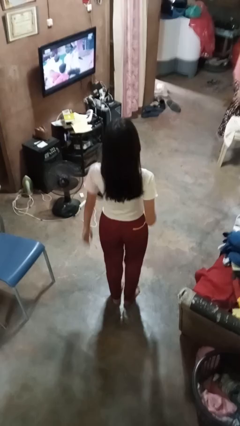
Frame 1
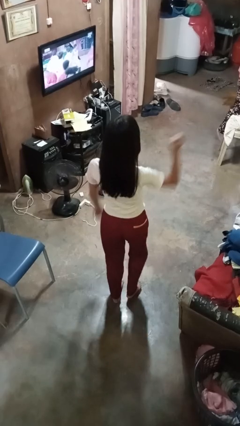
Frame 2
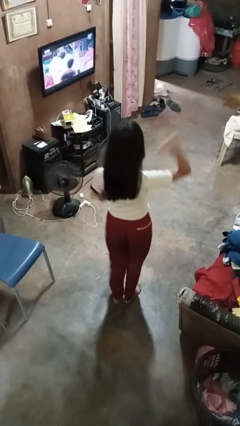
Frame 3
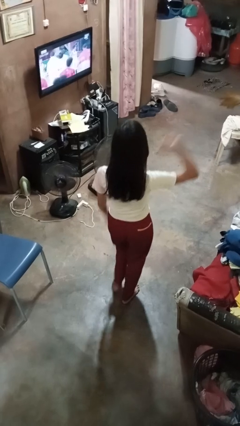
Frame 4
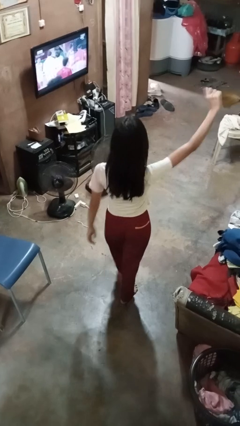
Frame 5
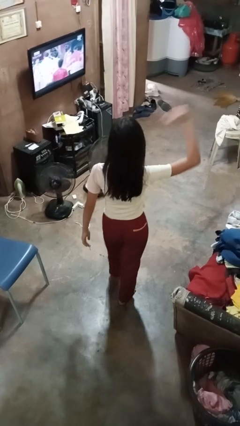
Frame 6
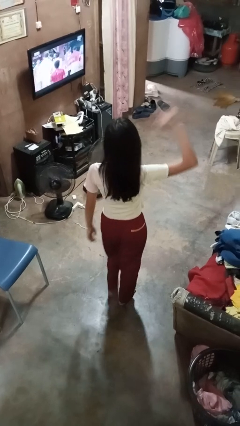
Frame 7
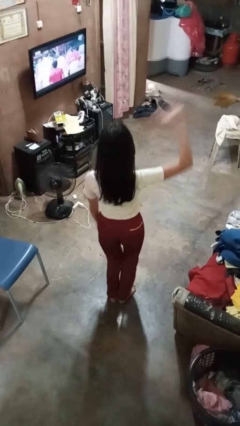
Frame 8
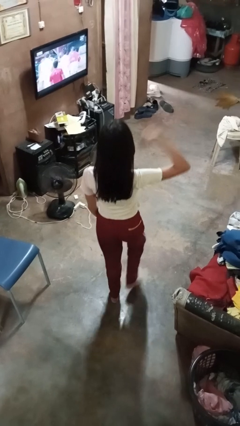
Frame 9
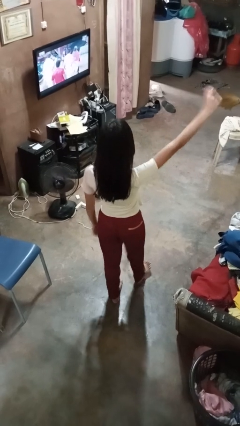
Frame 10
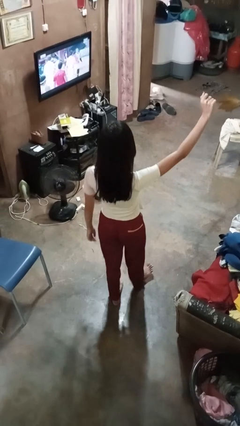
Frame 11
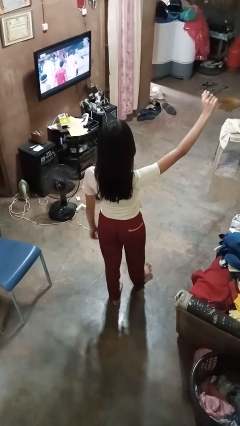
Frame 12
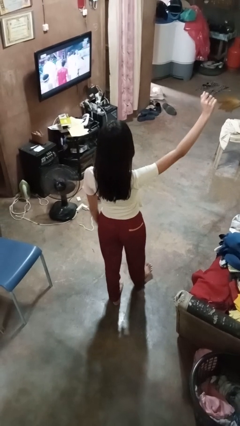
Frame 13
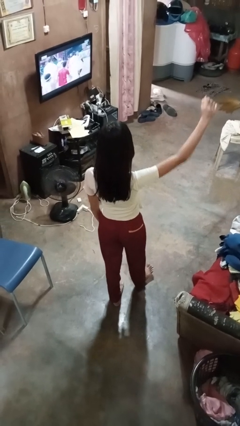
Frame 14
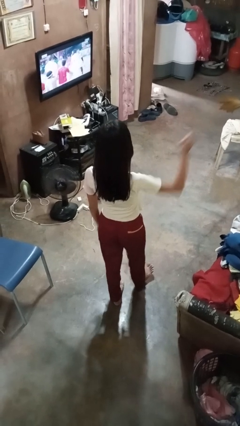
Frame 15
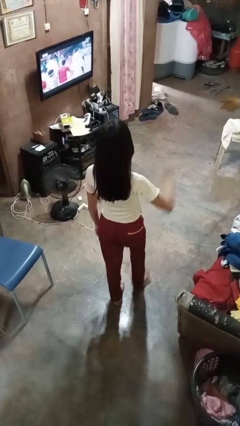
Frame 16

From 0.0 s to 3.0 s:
person dances in place

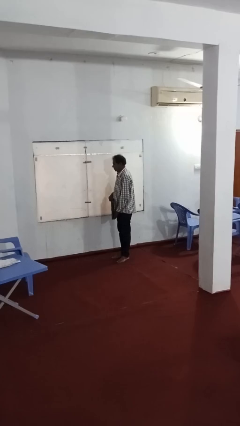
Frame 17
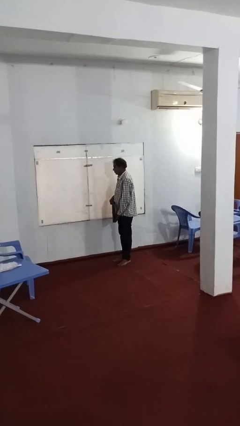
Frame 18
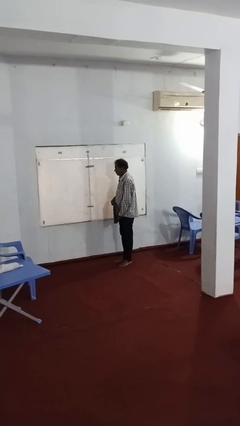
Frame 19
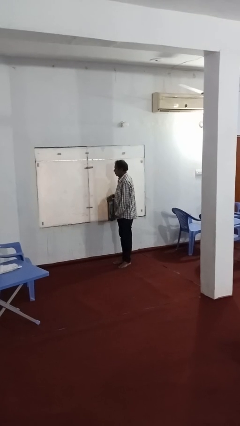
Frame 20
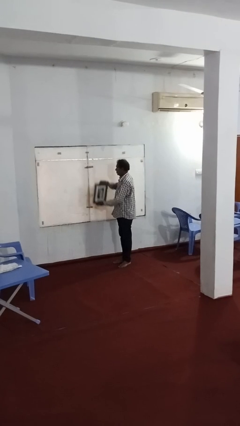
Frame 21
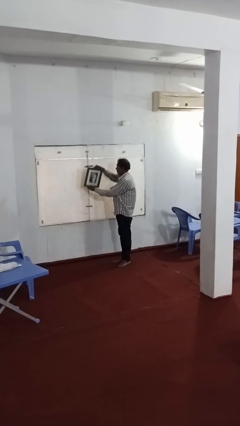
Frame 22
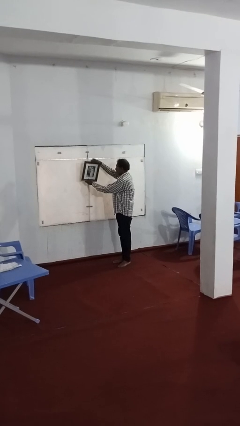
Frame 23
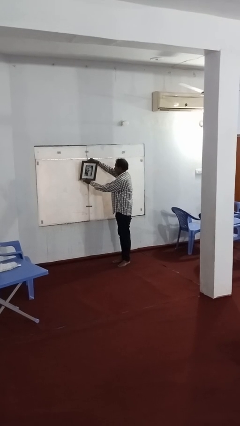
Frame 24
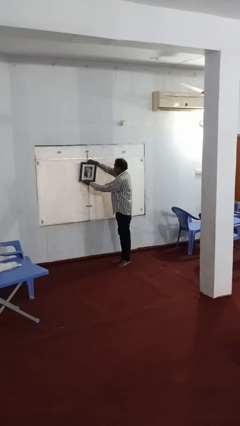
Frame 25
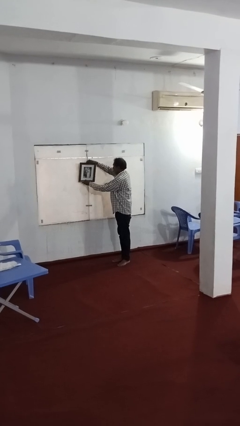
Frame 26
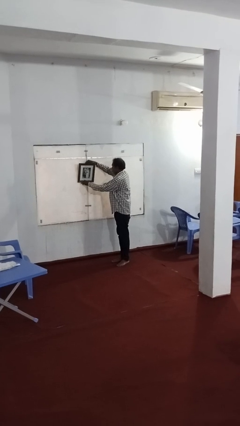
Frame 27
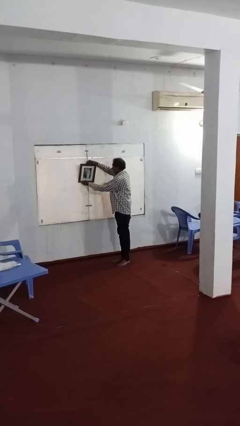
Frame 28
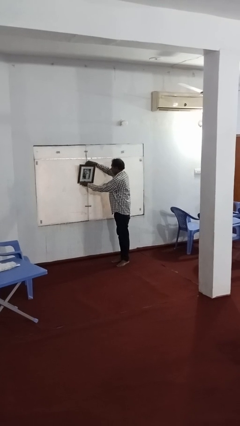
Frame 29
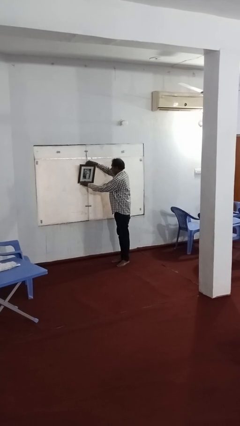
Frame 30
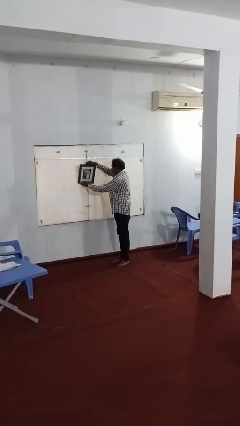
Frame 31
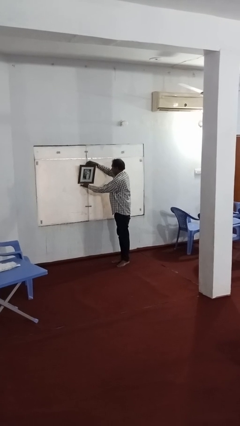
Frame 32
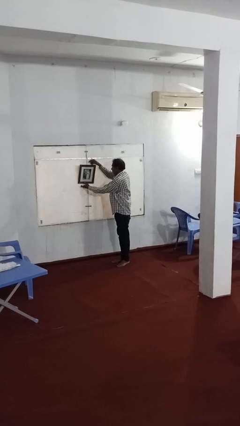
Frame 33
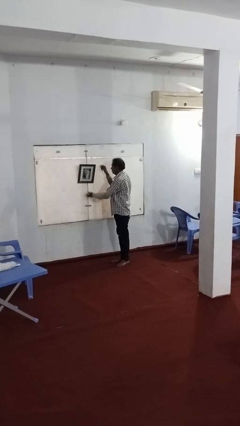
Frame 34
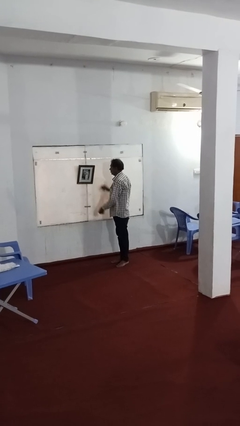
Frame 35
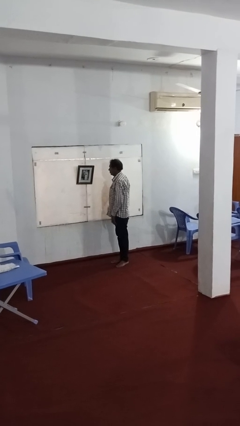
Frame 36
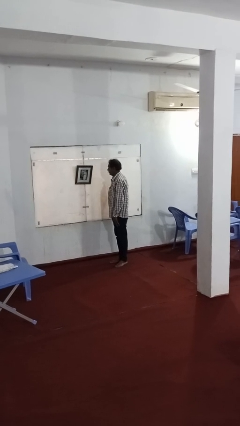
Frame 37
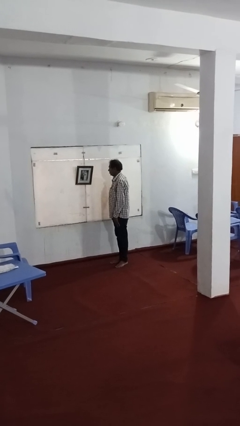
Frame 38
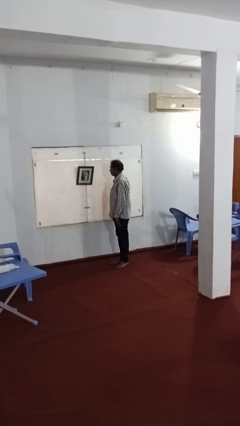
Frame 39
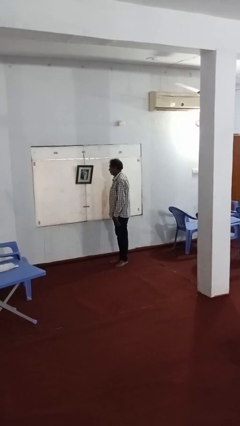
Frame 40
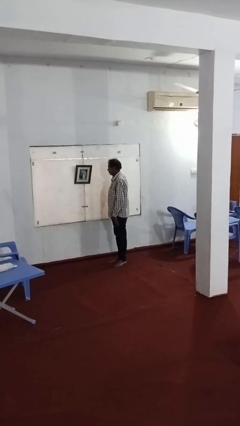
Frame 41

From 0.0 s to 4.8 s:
person puts up picture frame

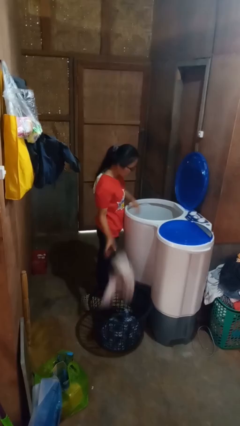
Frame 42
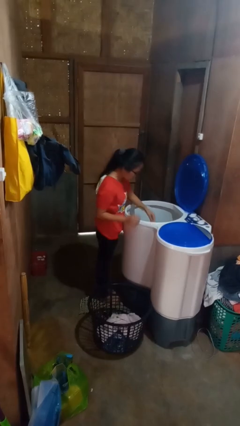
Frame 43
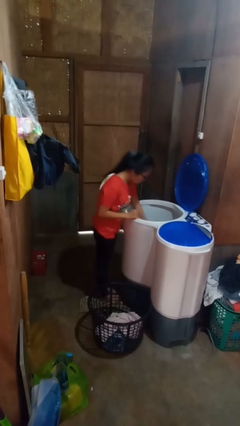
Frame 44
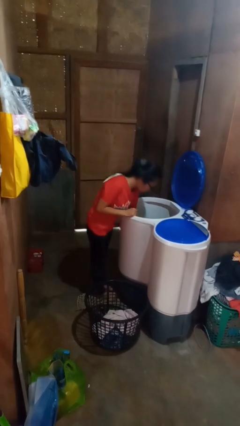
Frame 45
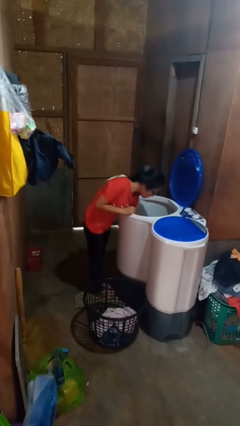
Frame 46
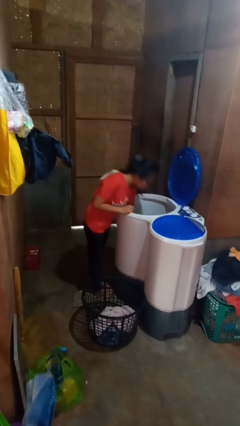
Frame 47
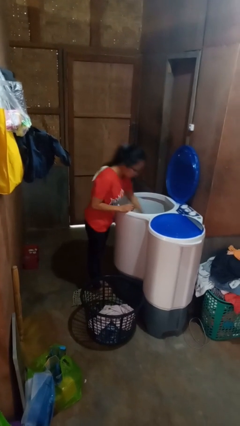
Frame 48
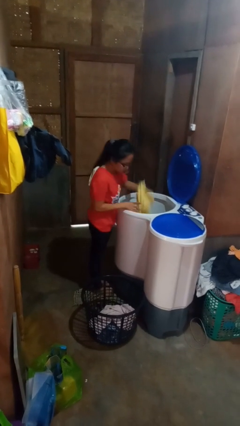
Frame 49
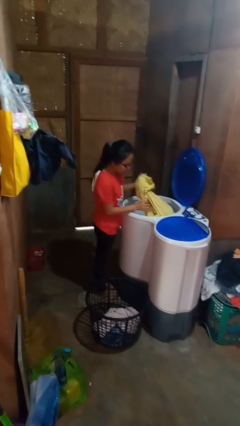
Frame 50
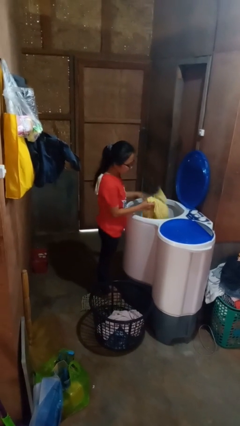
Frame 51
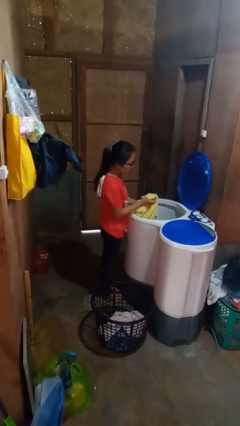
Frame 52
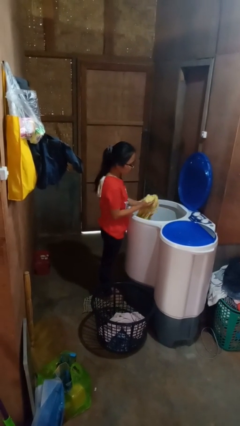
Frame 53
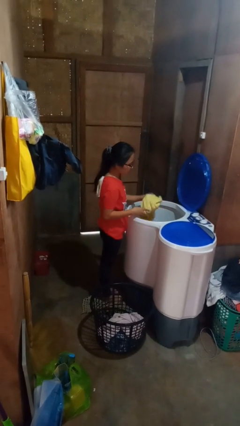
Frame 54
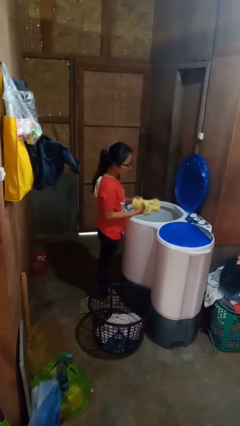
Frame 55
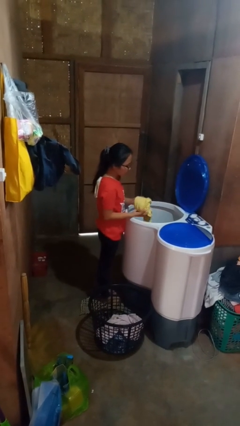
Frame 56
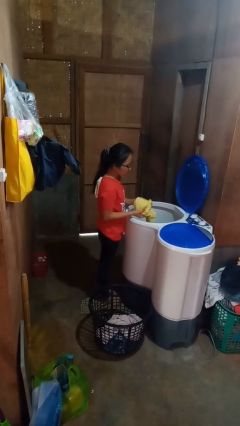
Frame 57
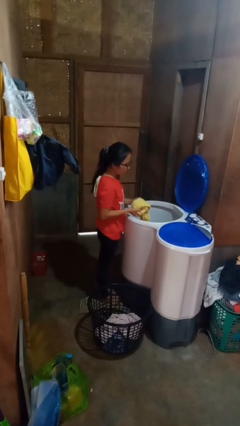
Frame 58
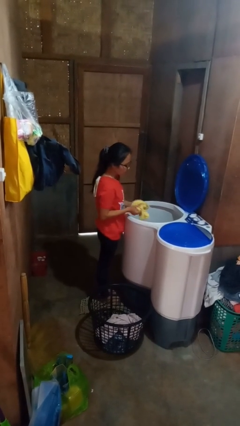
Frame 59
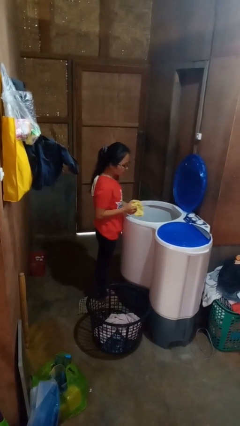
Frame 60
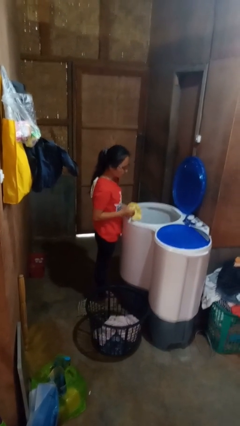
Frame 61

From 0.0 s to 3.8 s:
person loads clotheswasher

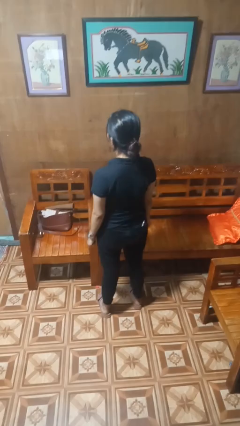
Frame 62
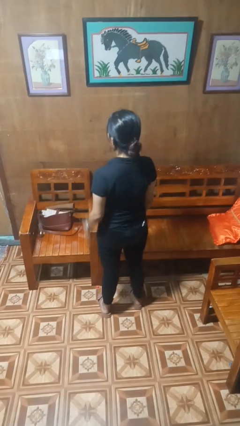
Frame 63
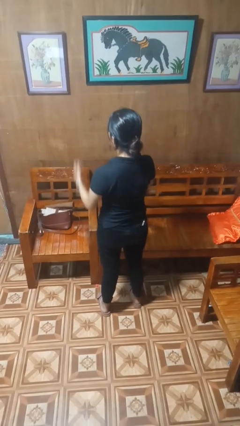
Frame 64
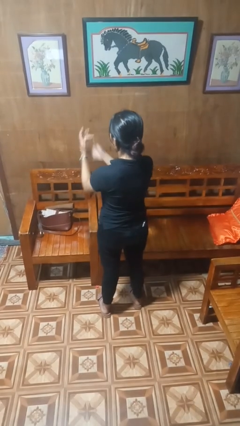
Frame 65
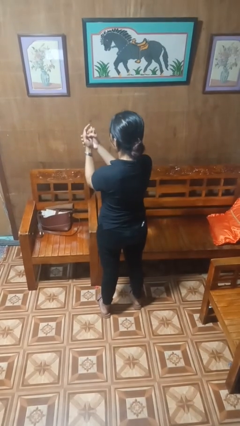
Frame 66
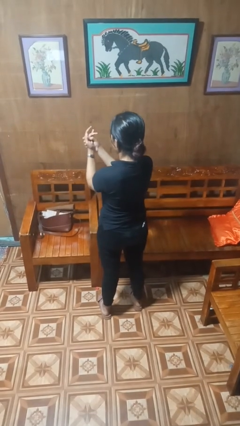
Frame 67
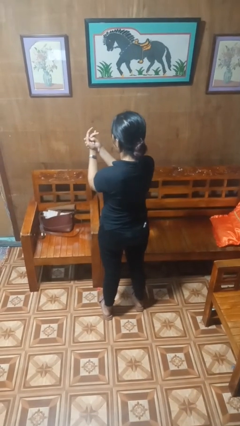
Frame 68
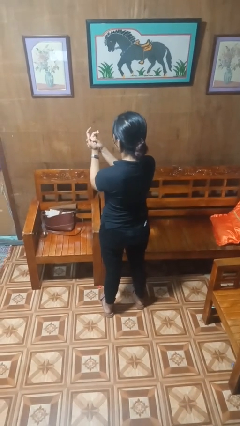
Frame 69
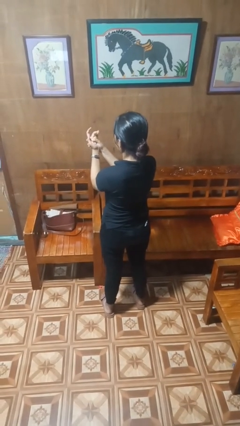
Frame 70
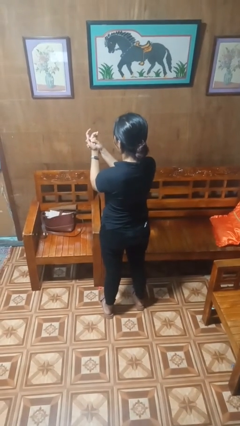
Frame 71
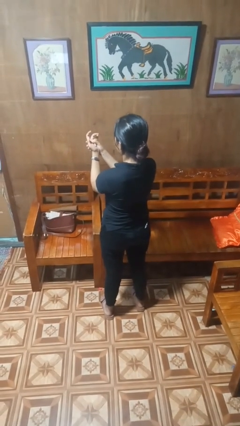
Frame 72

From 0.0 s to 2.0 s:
person cracks knuckles

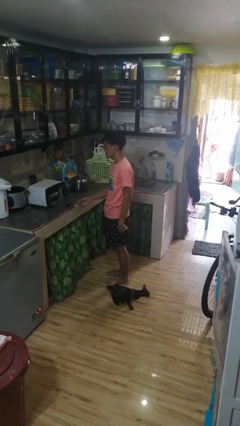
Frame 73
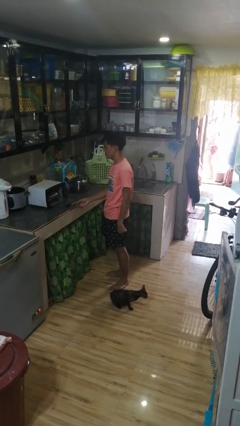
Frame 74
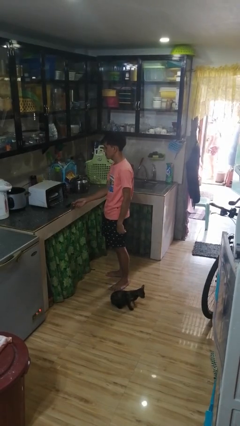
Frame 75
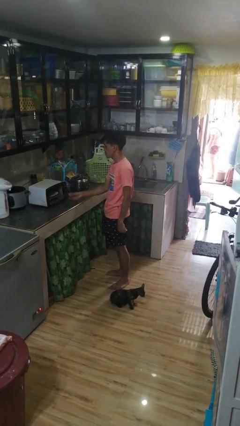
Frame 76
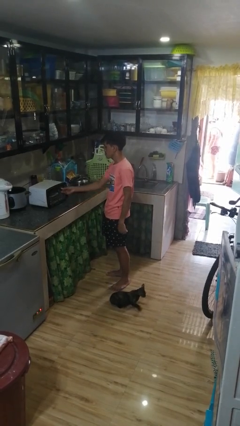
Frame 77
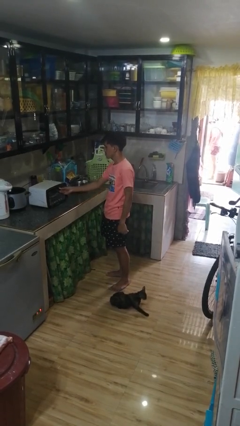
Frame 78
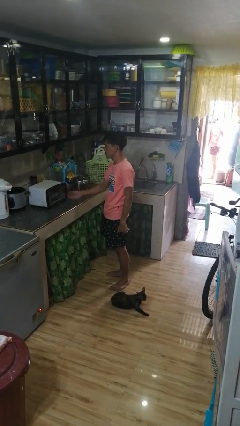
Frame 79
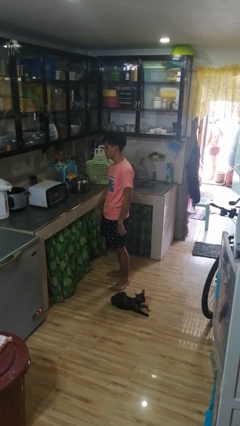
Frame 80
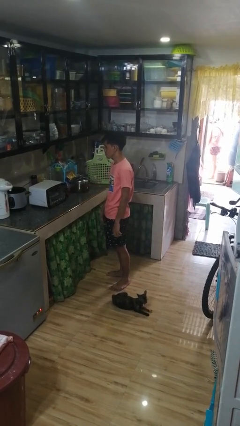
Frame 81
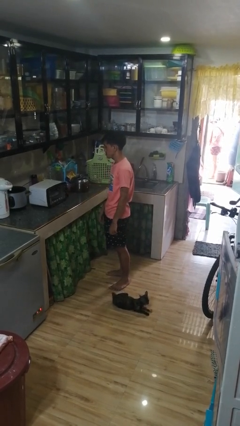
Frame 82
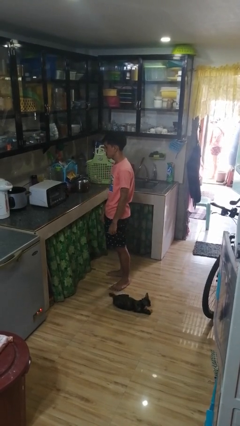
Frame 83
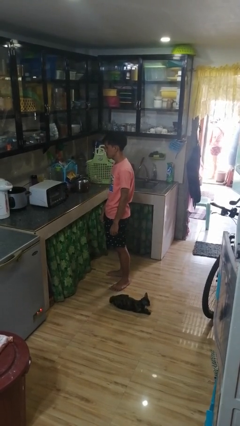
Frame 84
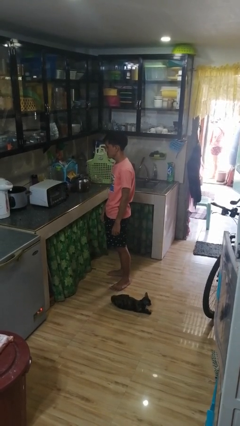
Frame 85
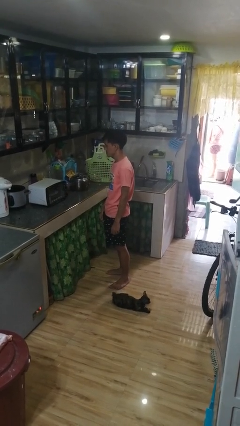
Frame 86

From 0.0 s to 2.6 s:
person closes microwave

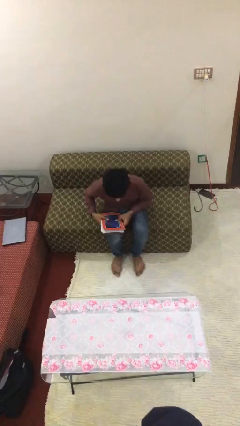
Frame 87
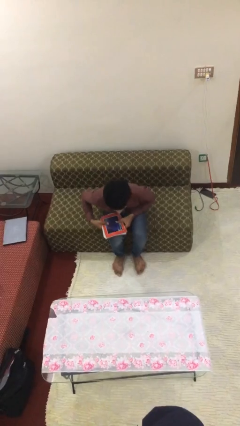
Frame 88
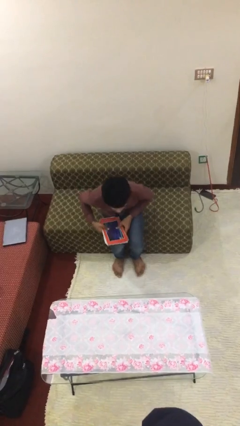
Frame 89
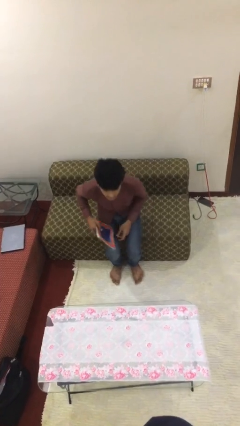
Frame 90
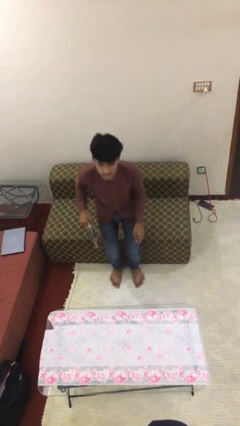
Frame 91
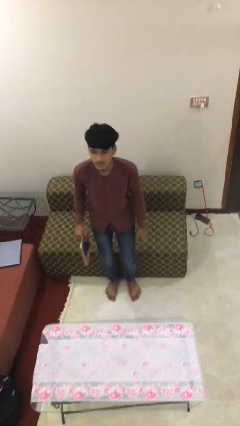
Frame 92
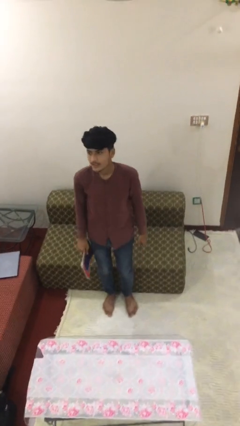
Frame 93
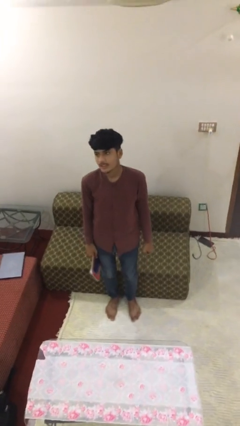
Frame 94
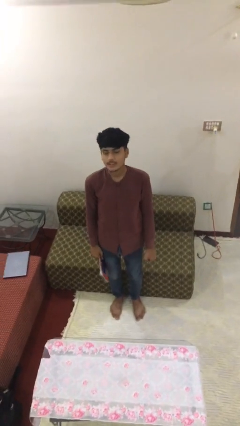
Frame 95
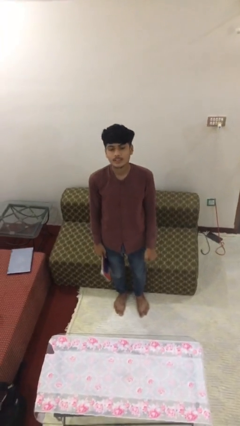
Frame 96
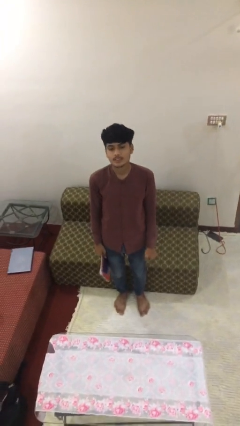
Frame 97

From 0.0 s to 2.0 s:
person stands up
